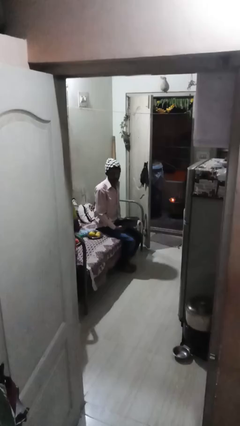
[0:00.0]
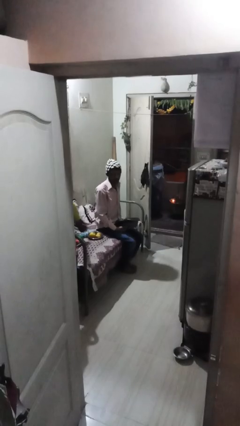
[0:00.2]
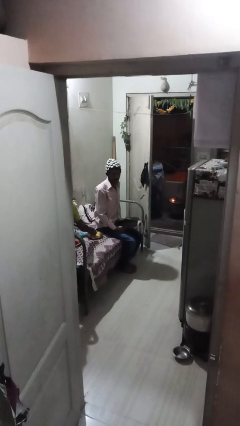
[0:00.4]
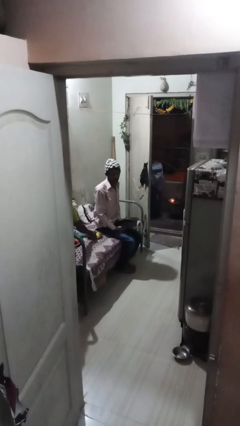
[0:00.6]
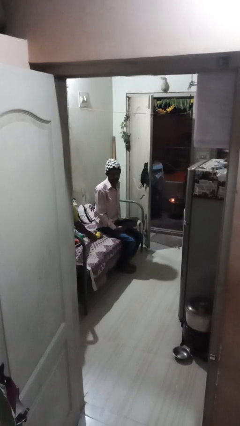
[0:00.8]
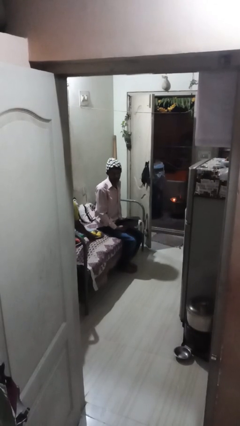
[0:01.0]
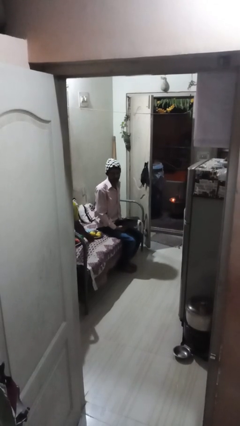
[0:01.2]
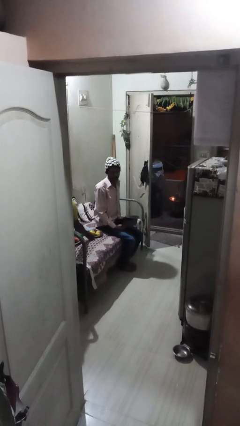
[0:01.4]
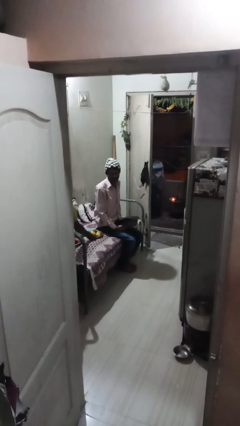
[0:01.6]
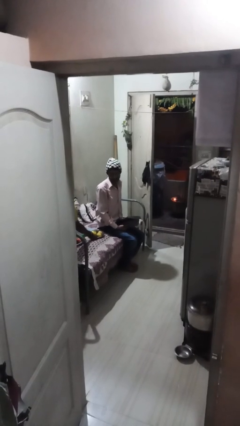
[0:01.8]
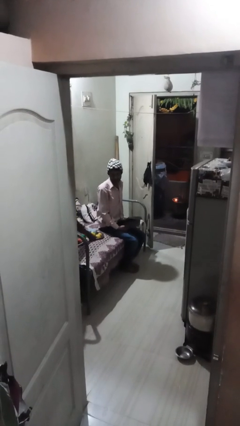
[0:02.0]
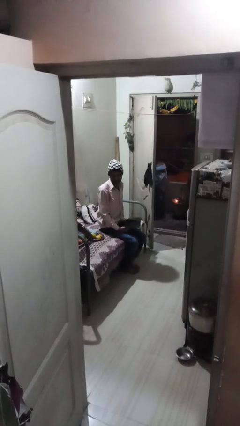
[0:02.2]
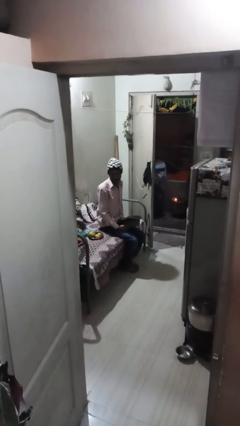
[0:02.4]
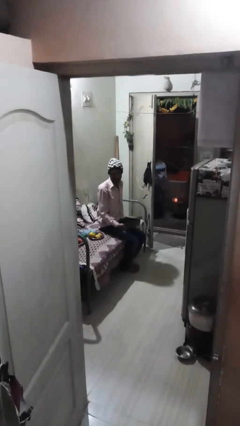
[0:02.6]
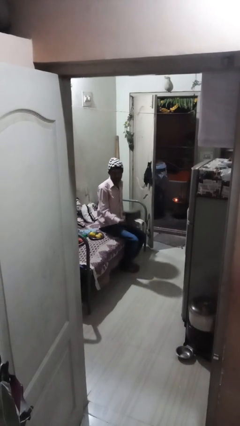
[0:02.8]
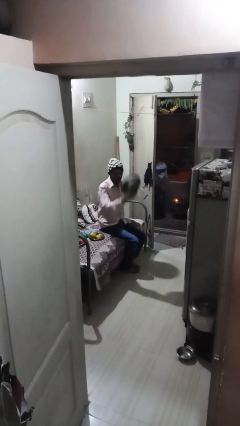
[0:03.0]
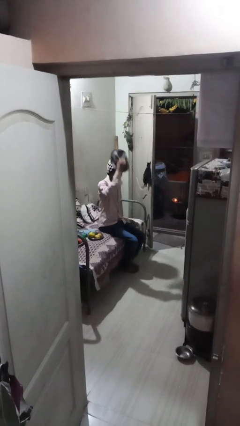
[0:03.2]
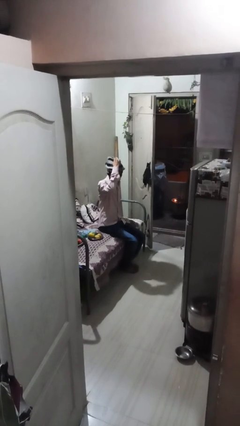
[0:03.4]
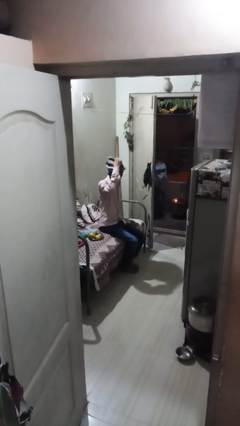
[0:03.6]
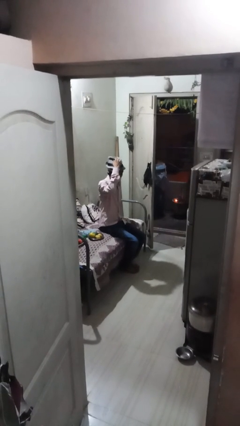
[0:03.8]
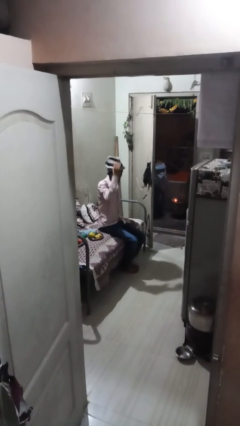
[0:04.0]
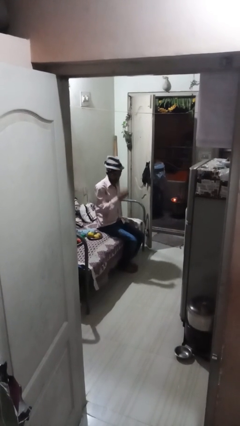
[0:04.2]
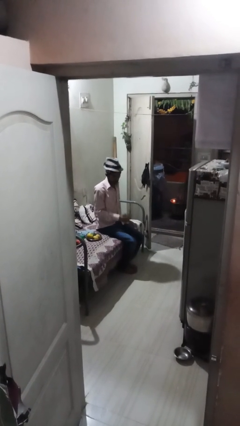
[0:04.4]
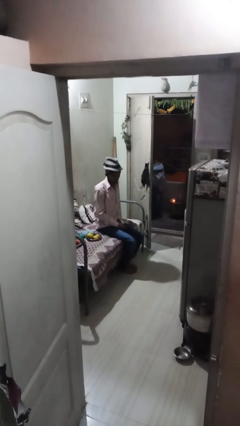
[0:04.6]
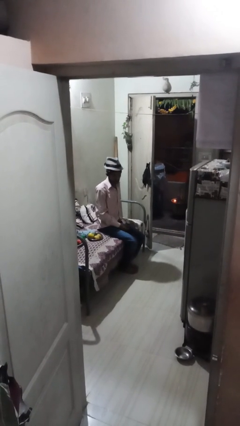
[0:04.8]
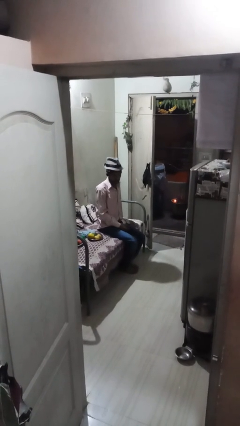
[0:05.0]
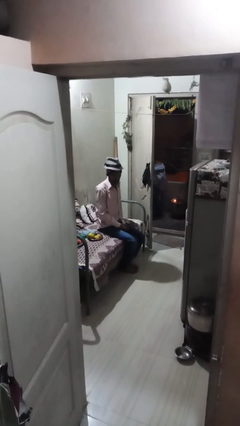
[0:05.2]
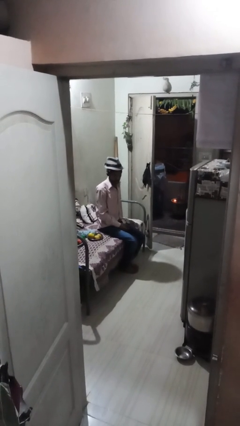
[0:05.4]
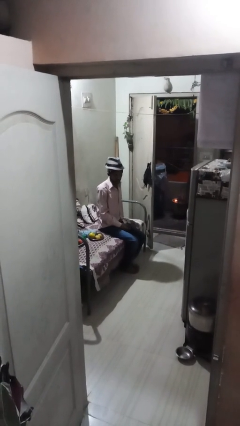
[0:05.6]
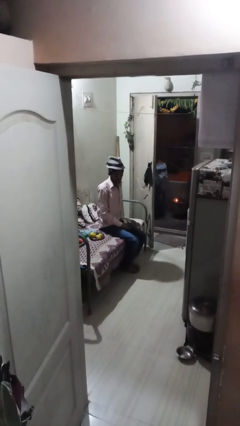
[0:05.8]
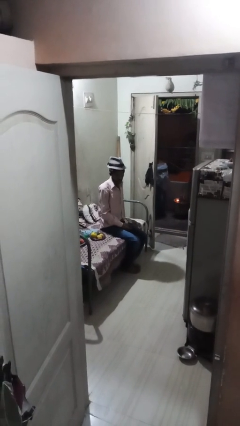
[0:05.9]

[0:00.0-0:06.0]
person puts on hat

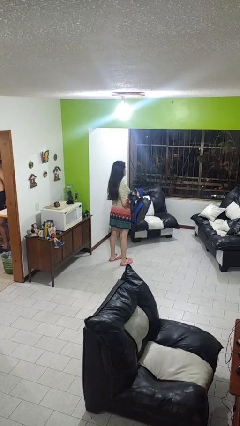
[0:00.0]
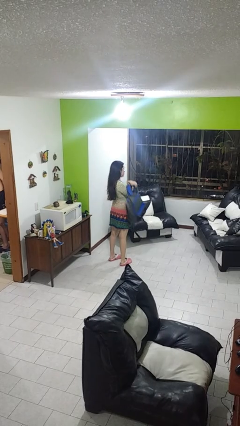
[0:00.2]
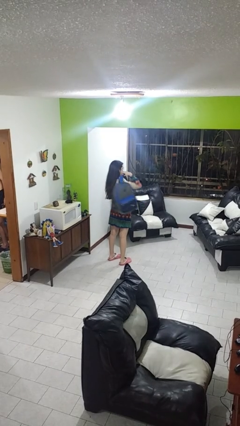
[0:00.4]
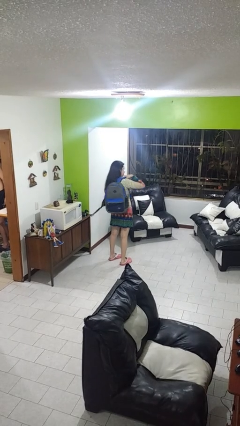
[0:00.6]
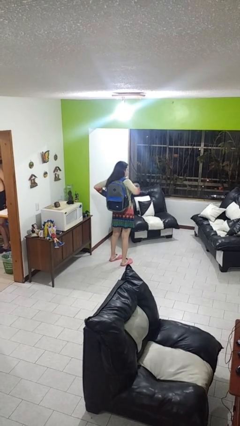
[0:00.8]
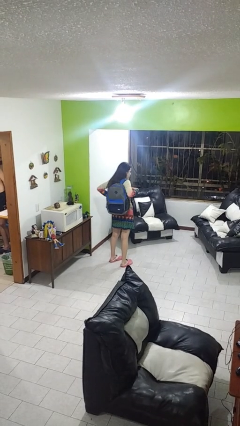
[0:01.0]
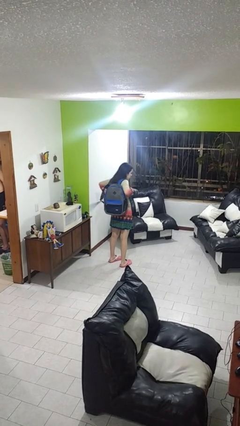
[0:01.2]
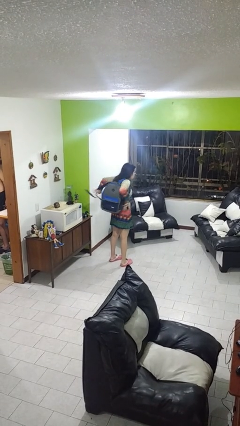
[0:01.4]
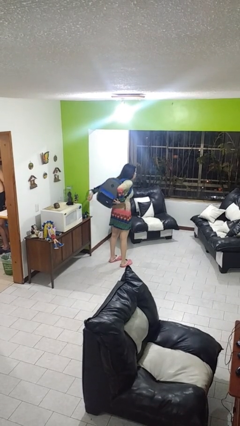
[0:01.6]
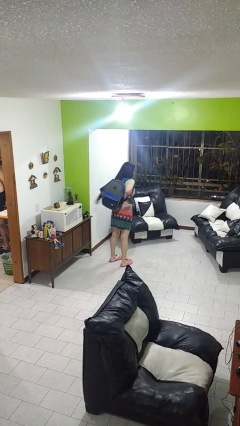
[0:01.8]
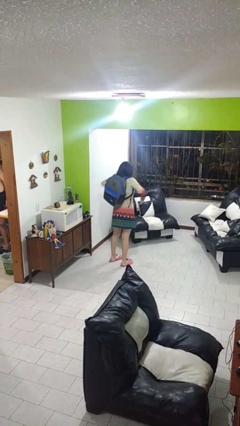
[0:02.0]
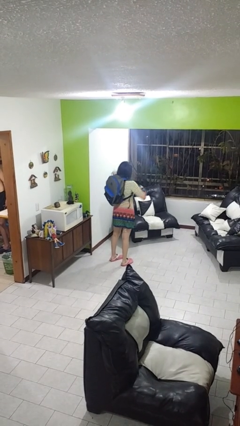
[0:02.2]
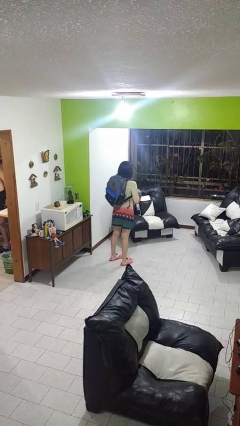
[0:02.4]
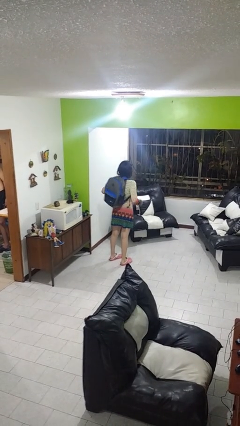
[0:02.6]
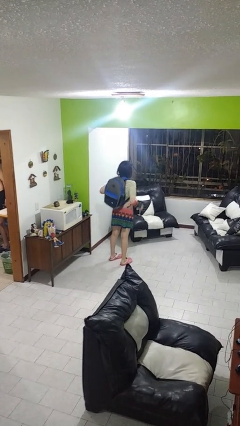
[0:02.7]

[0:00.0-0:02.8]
person puts on backpack

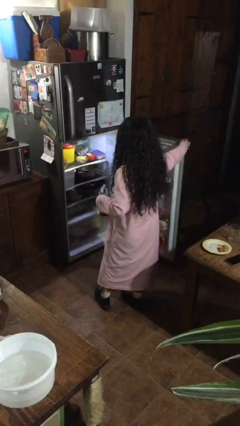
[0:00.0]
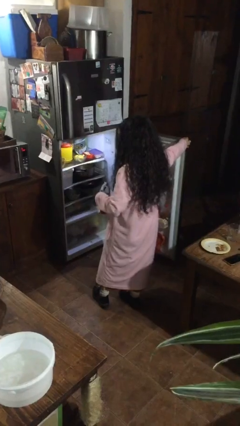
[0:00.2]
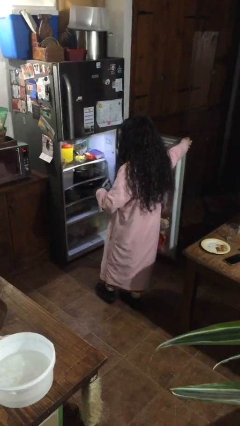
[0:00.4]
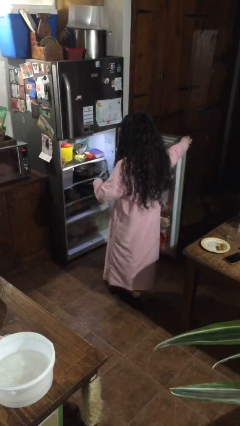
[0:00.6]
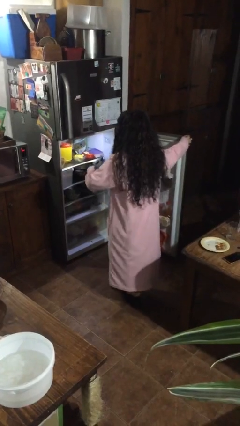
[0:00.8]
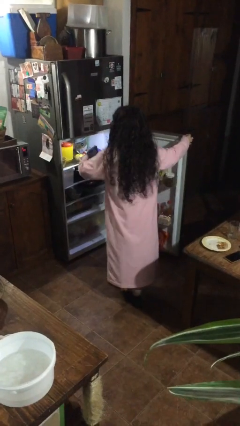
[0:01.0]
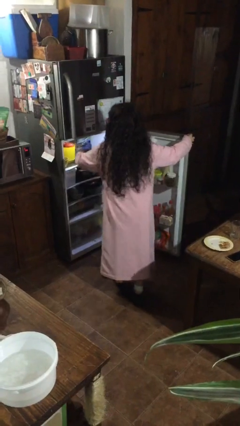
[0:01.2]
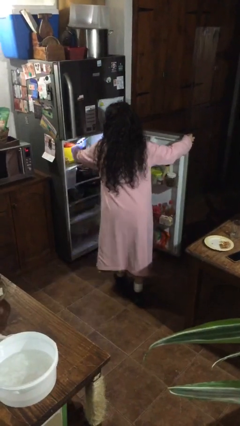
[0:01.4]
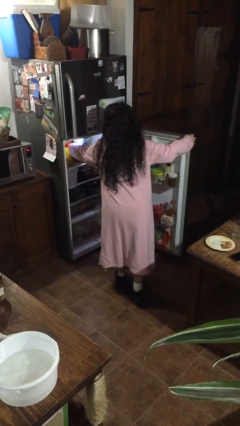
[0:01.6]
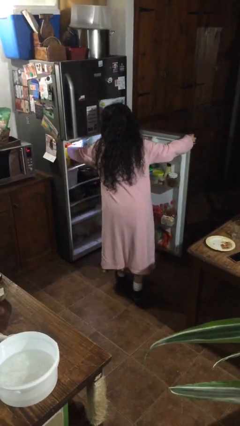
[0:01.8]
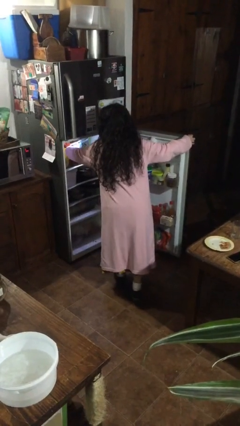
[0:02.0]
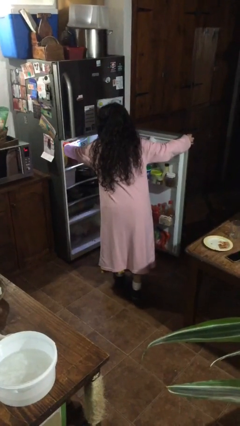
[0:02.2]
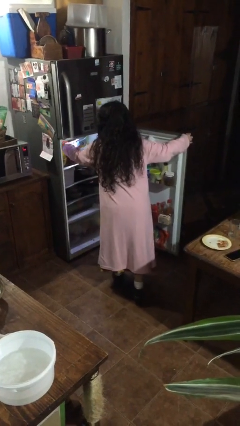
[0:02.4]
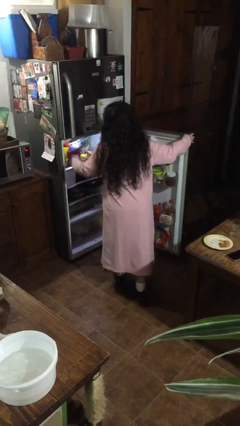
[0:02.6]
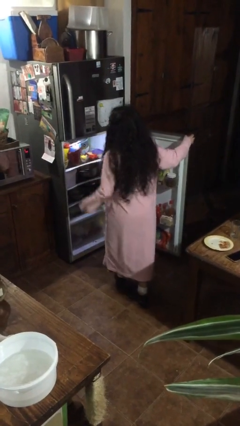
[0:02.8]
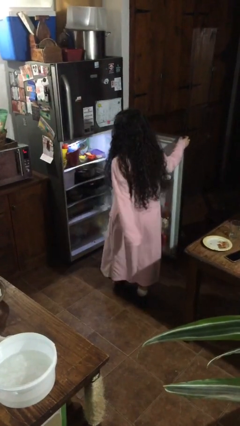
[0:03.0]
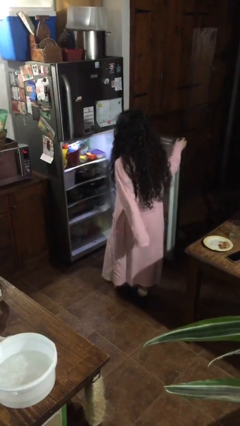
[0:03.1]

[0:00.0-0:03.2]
person puts object into refrigerator

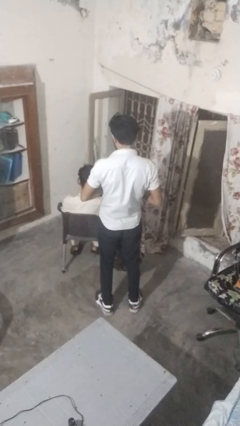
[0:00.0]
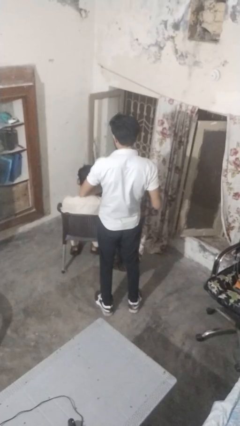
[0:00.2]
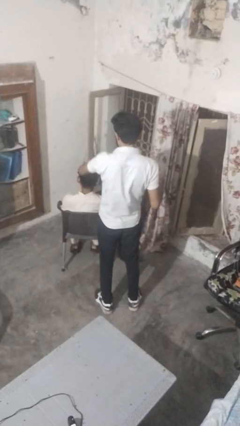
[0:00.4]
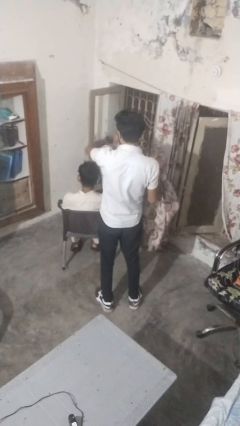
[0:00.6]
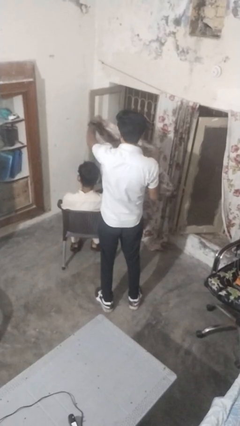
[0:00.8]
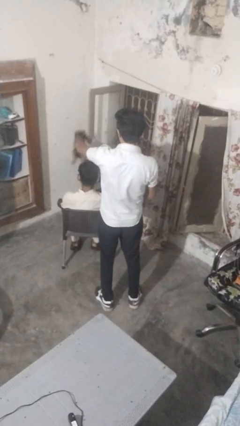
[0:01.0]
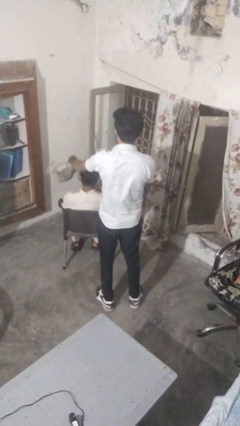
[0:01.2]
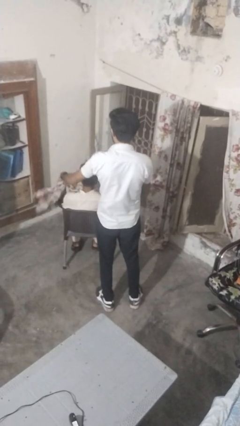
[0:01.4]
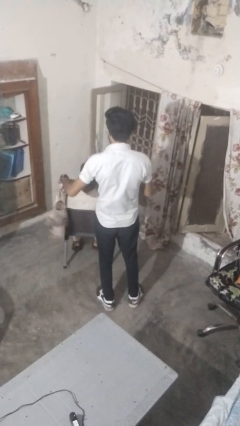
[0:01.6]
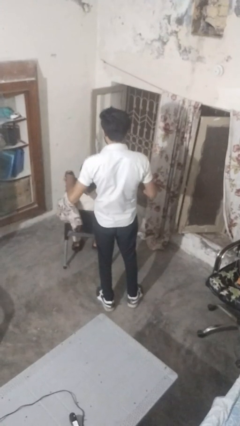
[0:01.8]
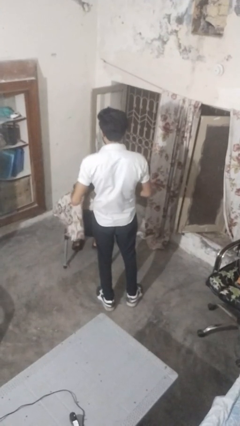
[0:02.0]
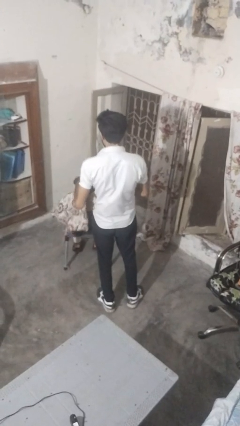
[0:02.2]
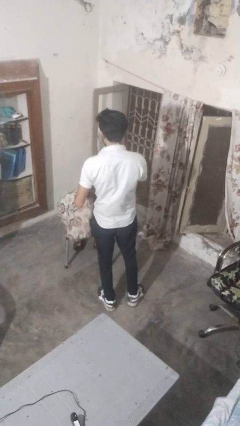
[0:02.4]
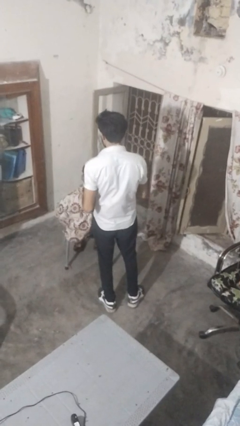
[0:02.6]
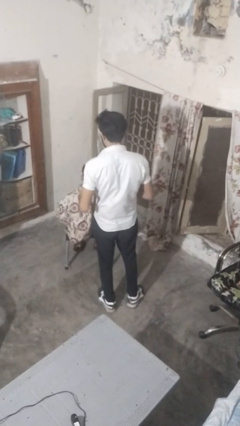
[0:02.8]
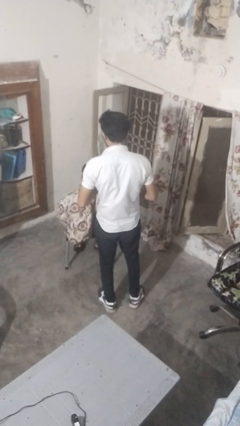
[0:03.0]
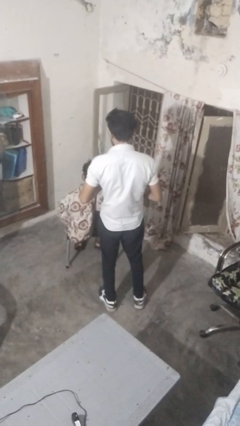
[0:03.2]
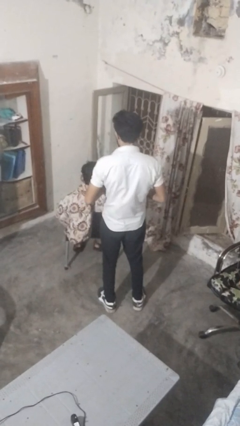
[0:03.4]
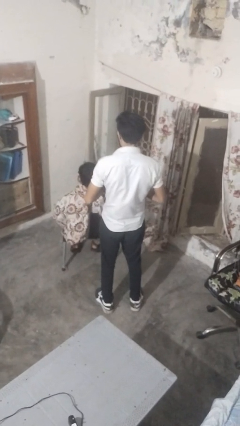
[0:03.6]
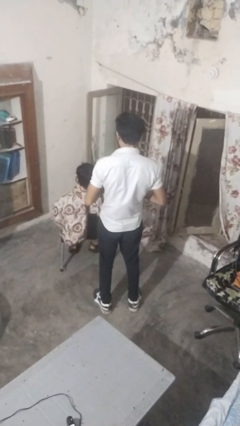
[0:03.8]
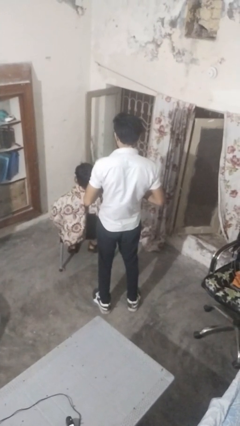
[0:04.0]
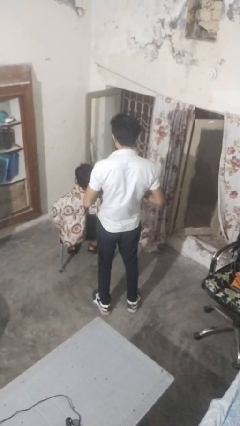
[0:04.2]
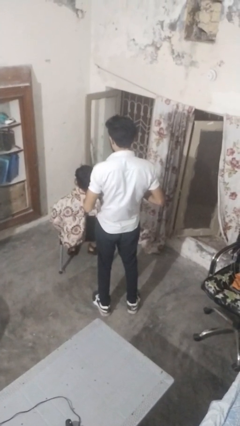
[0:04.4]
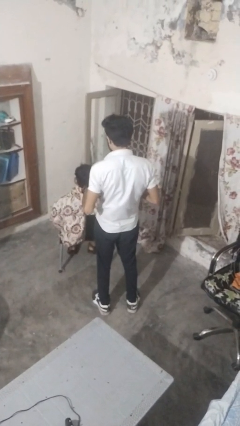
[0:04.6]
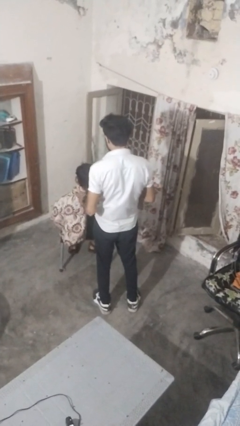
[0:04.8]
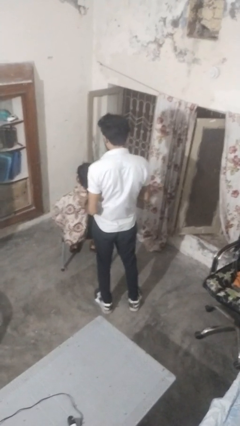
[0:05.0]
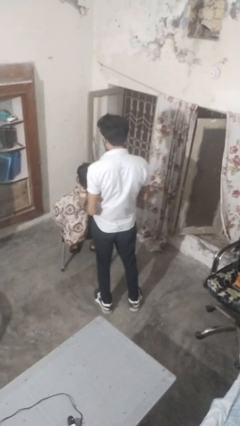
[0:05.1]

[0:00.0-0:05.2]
person covers friend with blanket

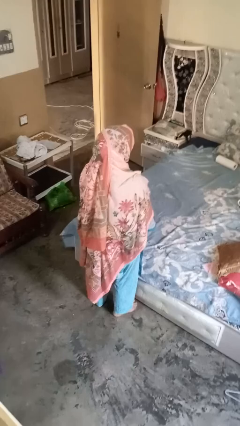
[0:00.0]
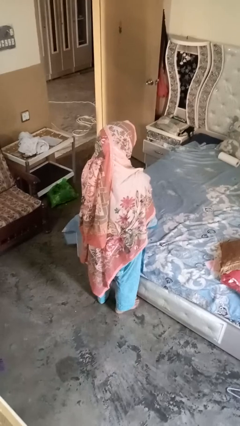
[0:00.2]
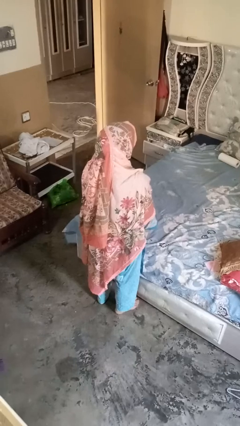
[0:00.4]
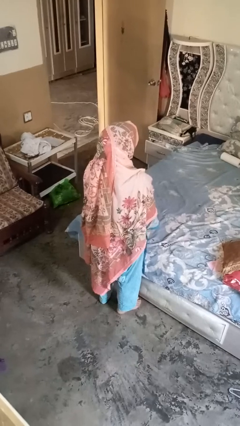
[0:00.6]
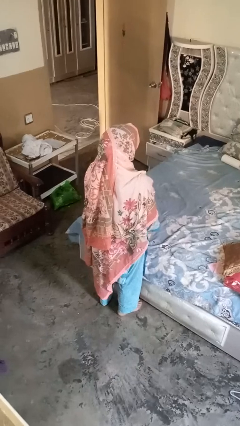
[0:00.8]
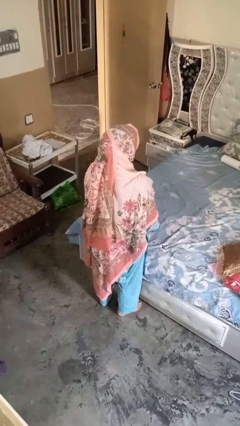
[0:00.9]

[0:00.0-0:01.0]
person strokes chin
